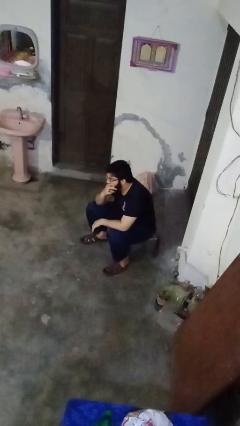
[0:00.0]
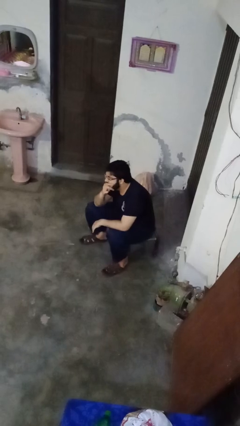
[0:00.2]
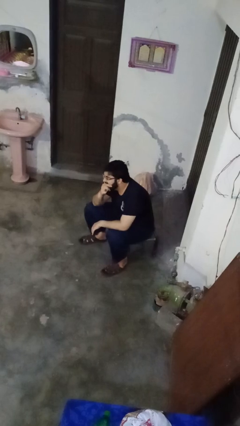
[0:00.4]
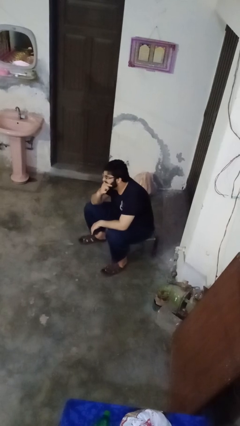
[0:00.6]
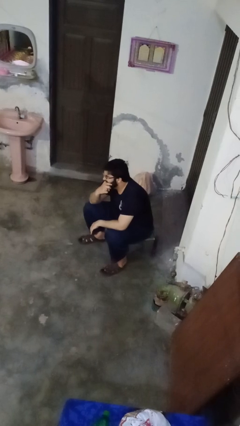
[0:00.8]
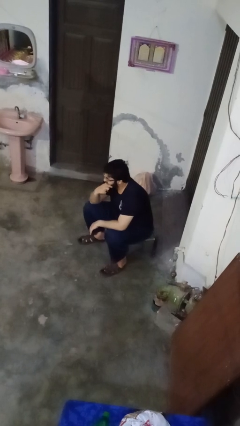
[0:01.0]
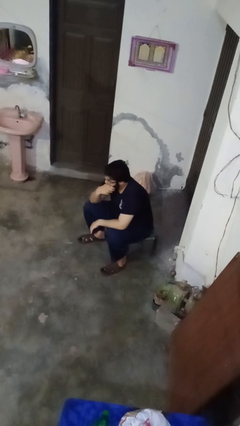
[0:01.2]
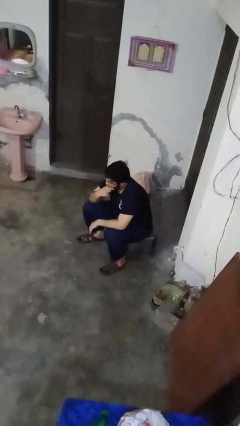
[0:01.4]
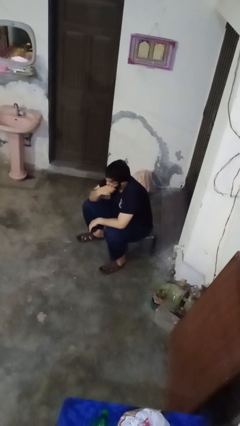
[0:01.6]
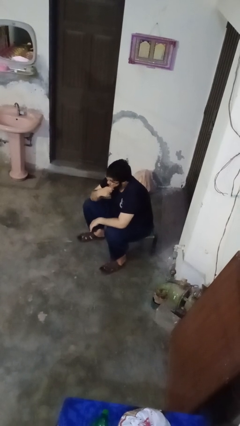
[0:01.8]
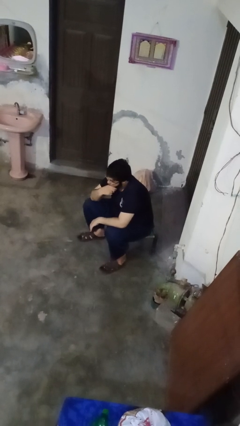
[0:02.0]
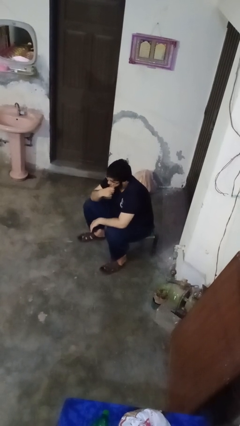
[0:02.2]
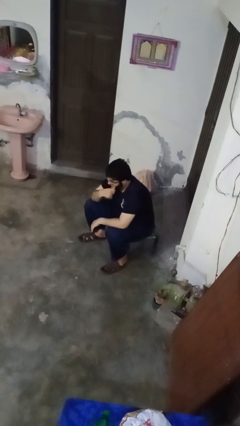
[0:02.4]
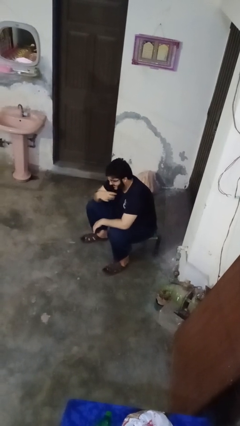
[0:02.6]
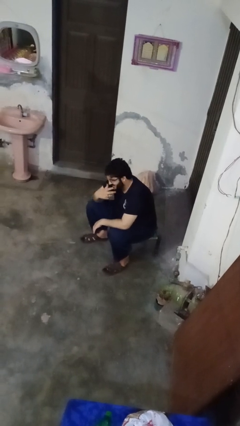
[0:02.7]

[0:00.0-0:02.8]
person strokes chin

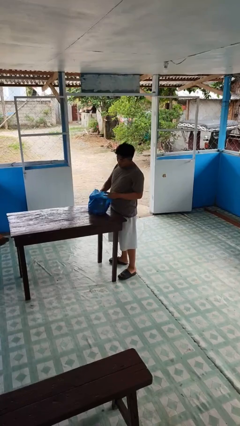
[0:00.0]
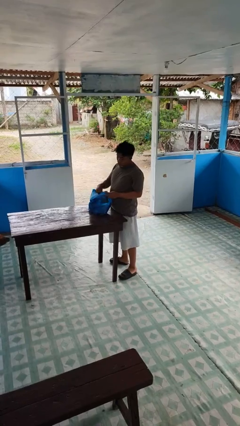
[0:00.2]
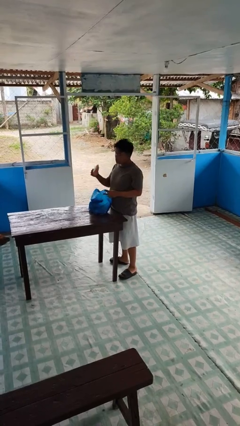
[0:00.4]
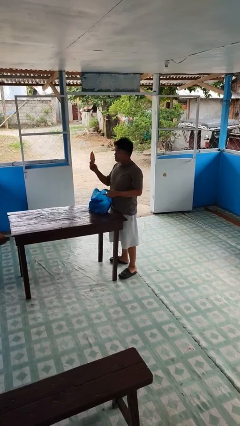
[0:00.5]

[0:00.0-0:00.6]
person takes object from bag

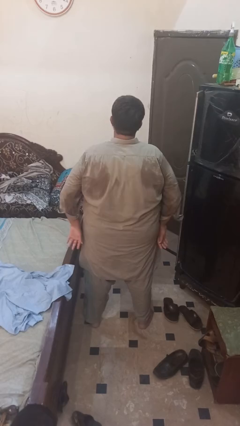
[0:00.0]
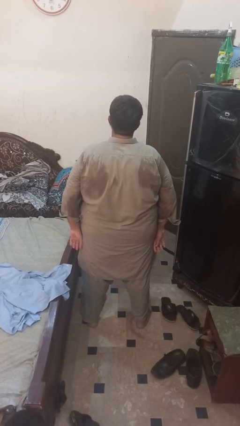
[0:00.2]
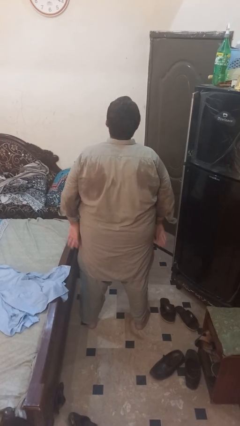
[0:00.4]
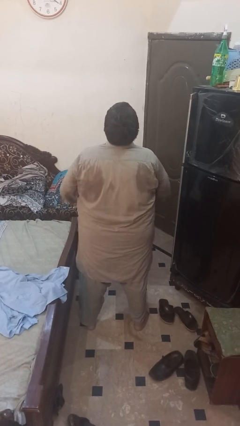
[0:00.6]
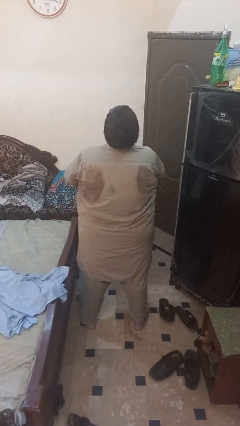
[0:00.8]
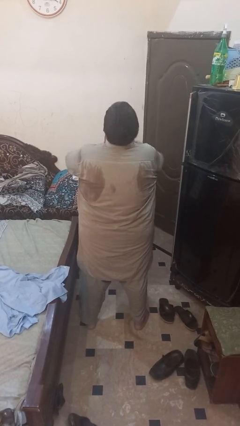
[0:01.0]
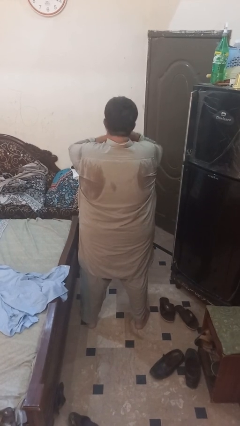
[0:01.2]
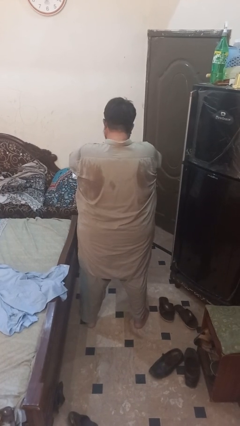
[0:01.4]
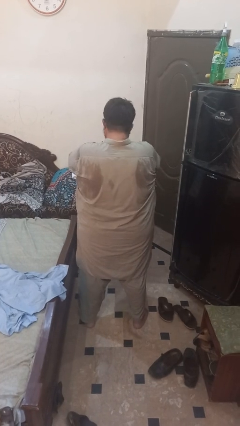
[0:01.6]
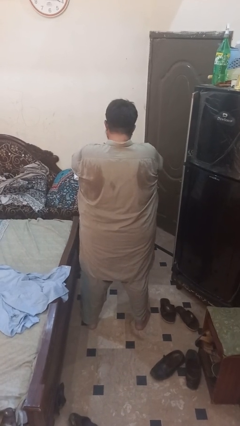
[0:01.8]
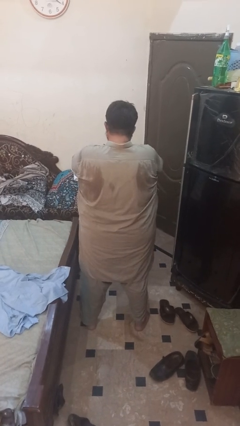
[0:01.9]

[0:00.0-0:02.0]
person sneezes into hand

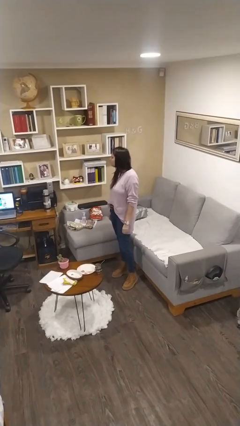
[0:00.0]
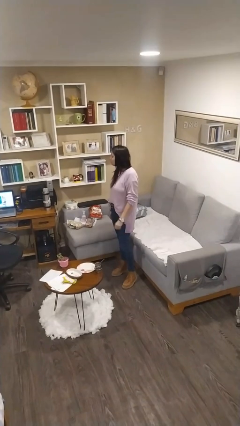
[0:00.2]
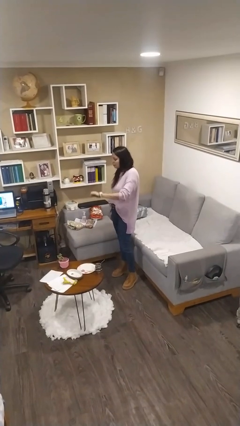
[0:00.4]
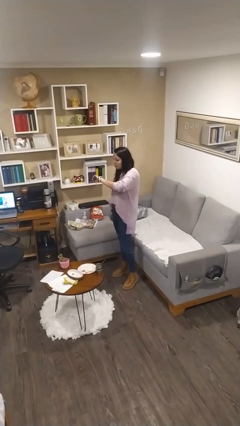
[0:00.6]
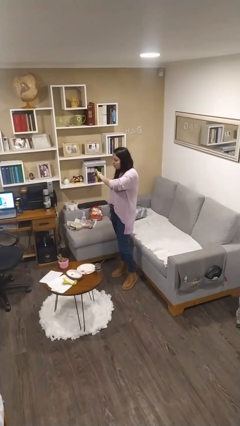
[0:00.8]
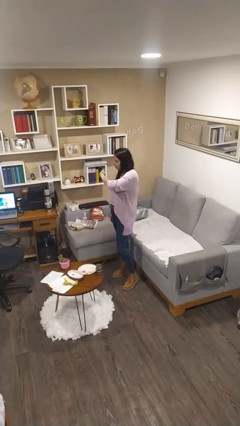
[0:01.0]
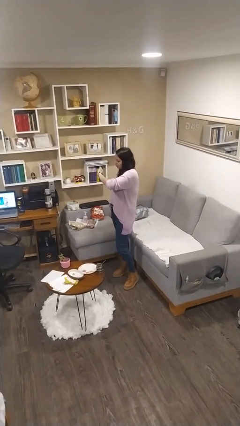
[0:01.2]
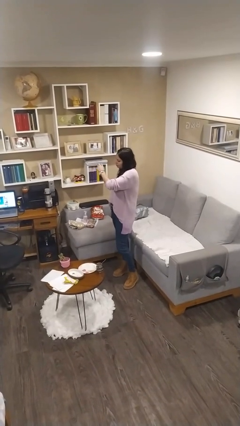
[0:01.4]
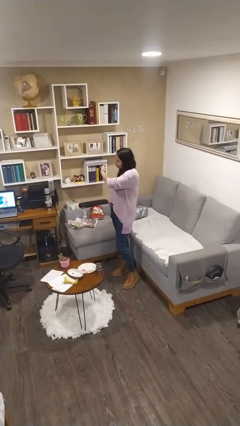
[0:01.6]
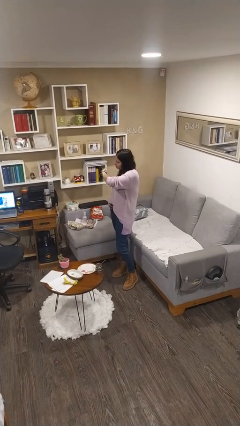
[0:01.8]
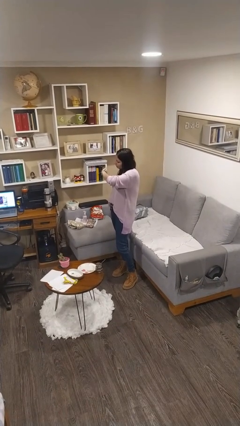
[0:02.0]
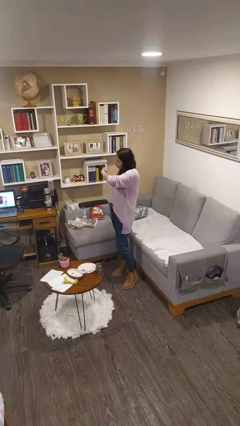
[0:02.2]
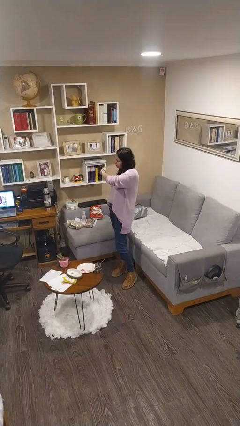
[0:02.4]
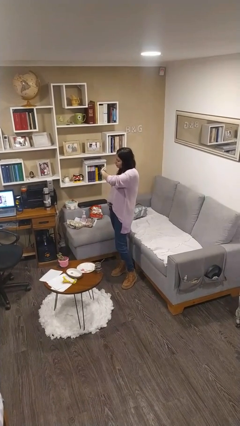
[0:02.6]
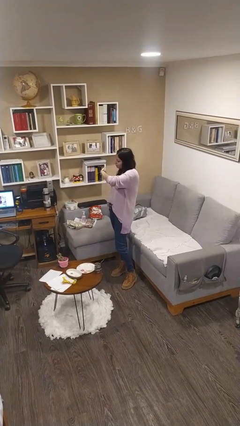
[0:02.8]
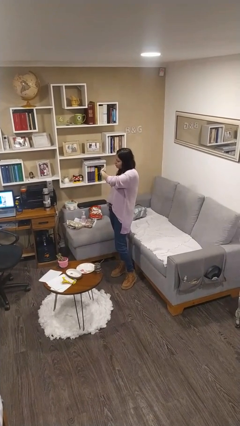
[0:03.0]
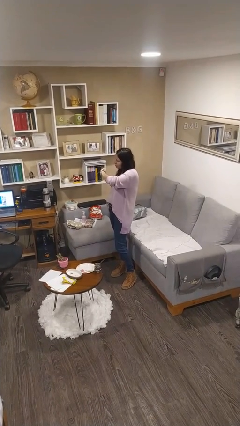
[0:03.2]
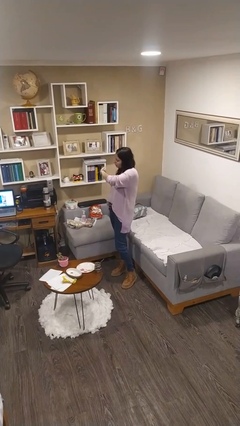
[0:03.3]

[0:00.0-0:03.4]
person looks at wristwatch

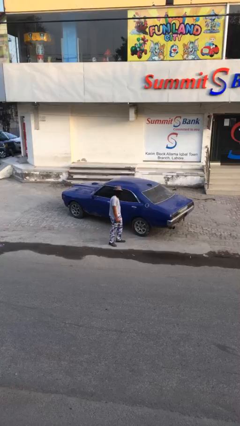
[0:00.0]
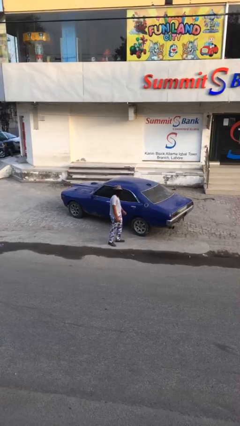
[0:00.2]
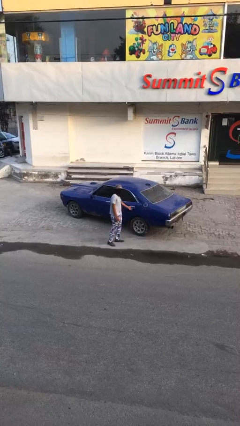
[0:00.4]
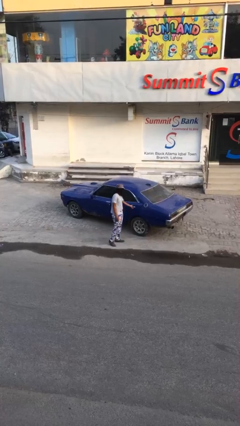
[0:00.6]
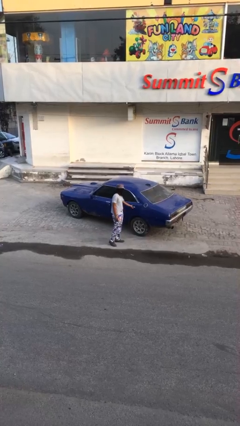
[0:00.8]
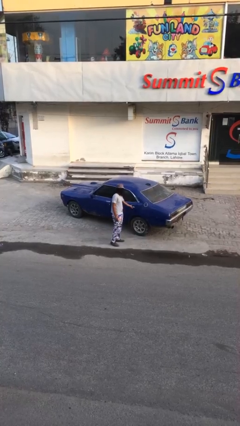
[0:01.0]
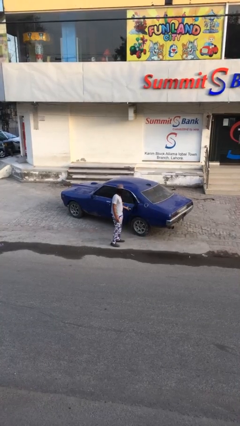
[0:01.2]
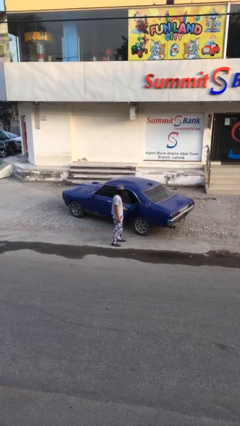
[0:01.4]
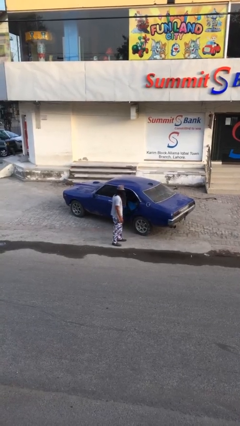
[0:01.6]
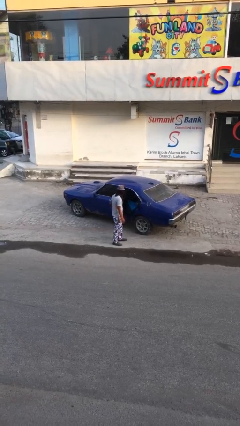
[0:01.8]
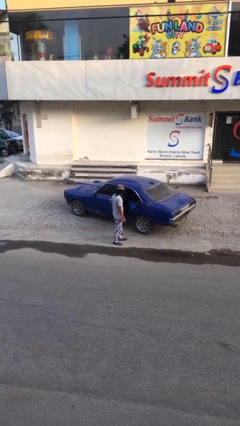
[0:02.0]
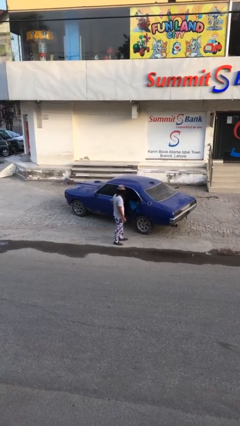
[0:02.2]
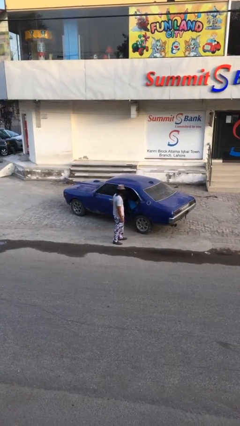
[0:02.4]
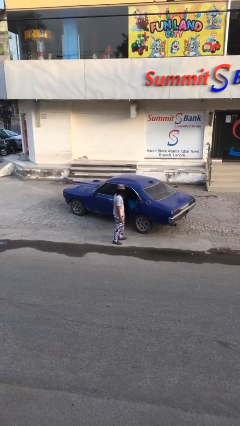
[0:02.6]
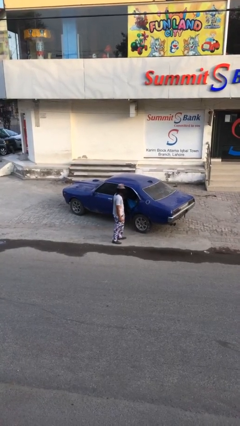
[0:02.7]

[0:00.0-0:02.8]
person opens car door

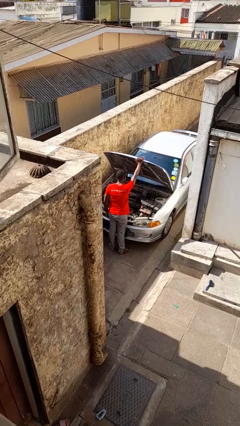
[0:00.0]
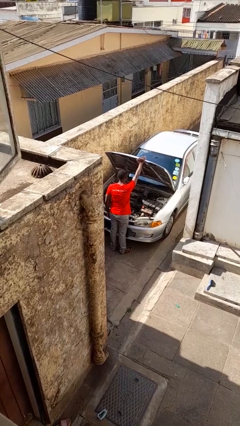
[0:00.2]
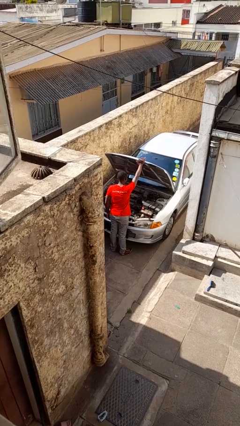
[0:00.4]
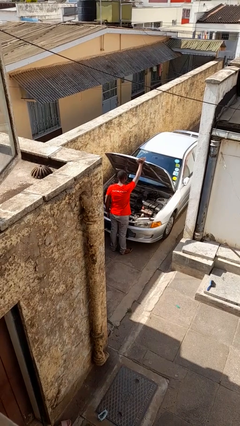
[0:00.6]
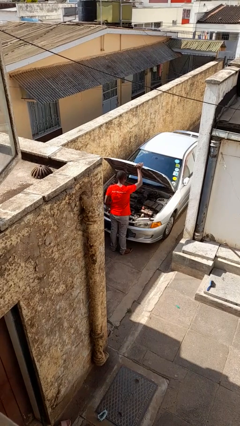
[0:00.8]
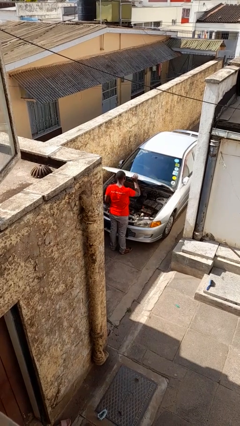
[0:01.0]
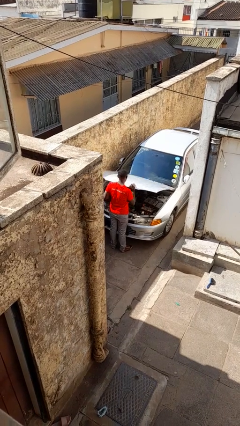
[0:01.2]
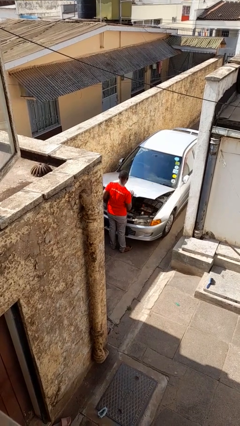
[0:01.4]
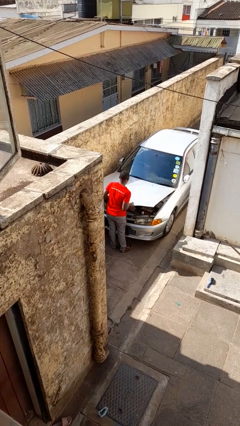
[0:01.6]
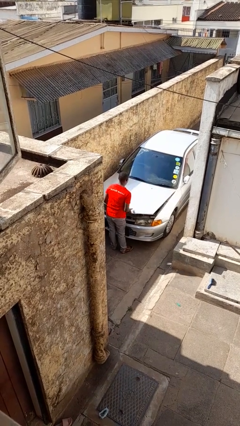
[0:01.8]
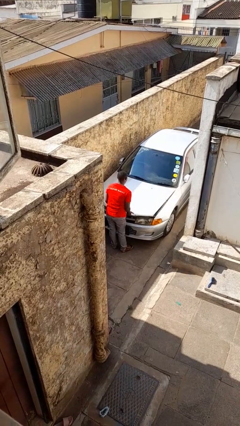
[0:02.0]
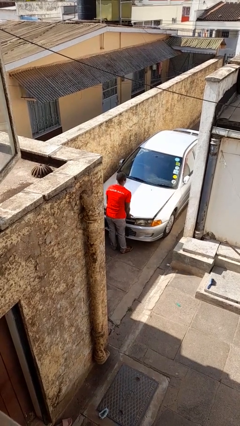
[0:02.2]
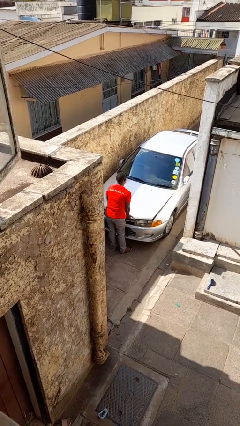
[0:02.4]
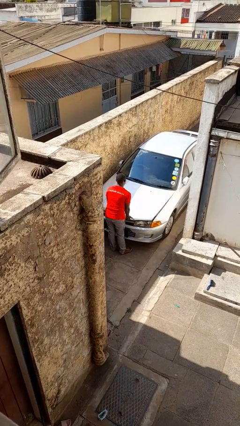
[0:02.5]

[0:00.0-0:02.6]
person closes car hood

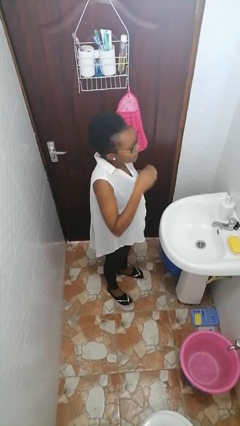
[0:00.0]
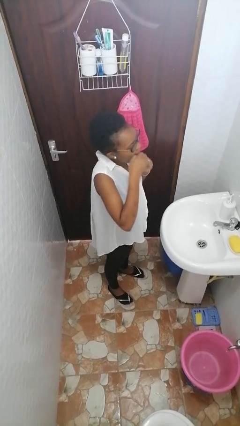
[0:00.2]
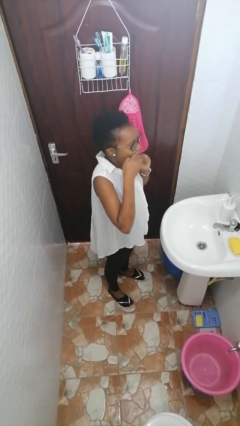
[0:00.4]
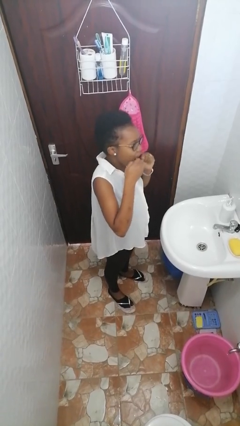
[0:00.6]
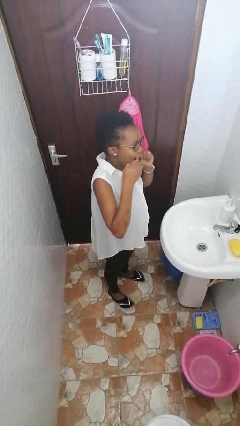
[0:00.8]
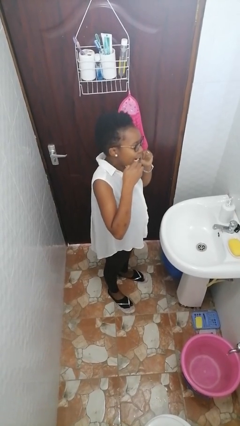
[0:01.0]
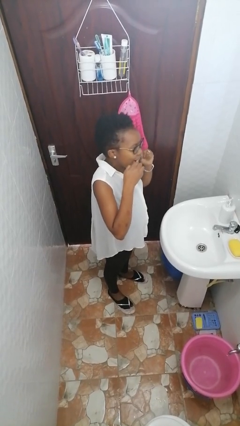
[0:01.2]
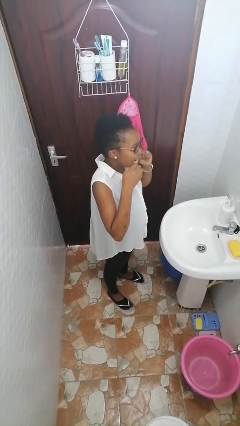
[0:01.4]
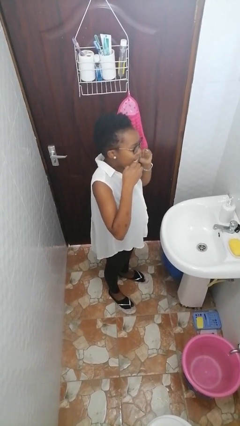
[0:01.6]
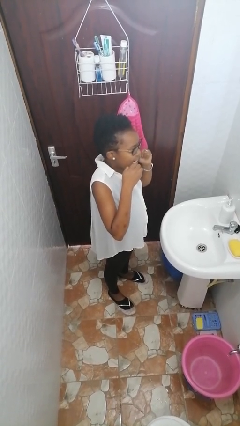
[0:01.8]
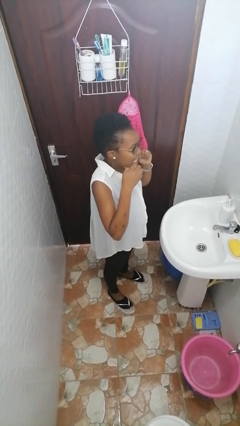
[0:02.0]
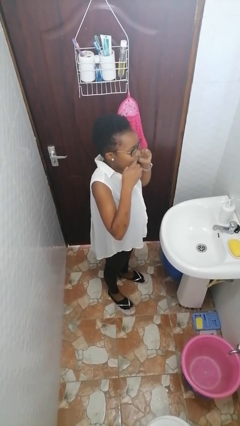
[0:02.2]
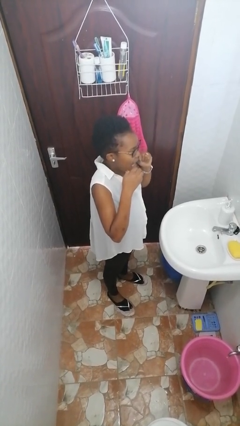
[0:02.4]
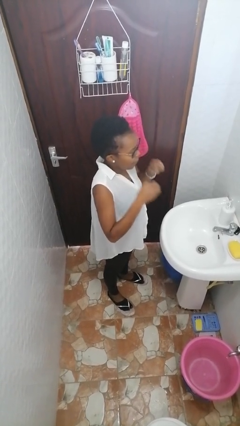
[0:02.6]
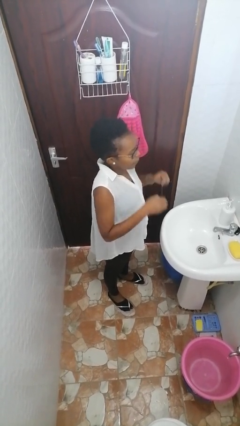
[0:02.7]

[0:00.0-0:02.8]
person flosses
